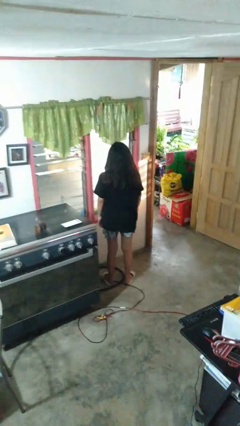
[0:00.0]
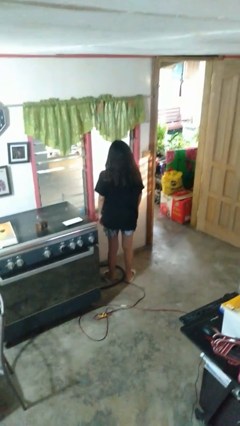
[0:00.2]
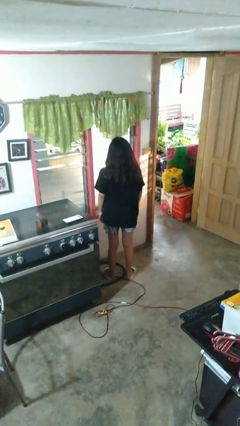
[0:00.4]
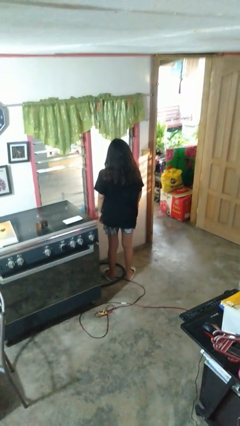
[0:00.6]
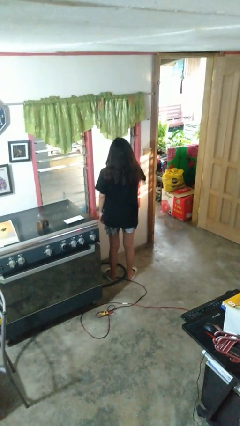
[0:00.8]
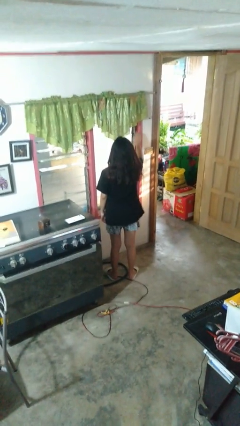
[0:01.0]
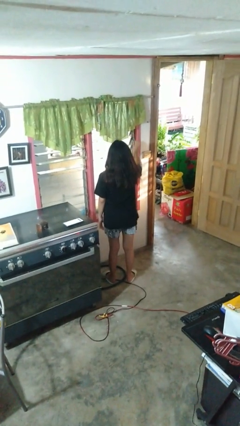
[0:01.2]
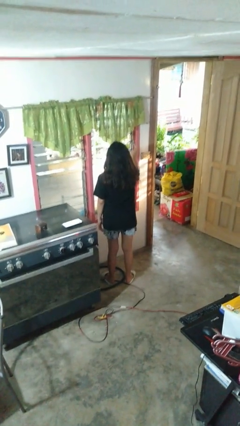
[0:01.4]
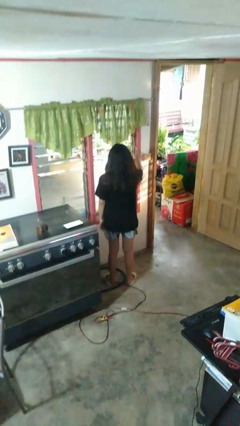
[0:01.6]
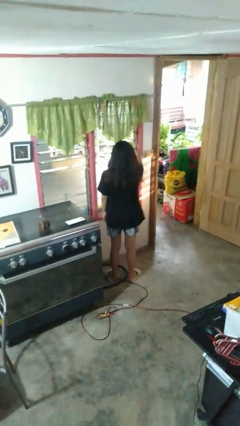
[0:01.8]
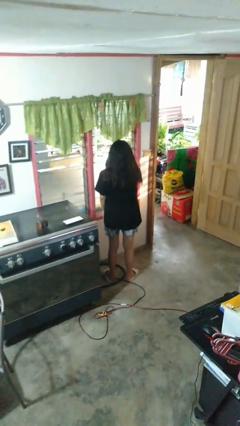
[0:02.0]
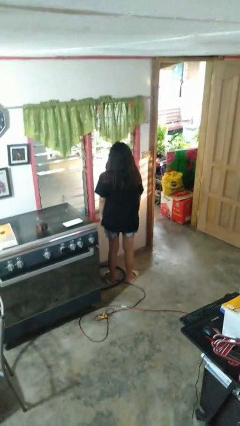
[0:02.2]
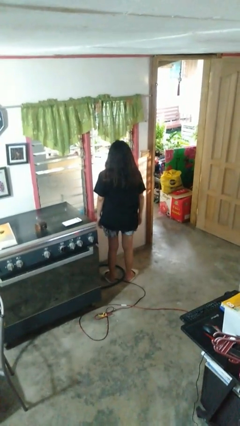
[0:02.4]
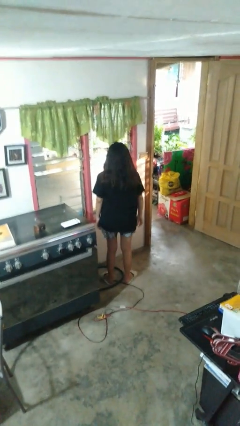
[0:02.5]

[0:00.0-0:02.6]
person opens home window

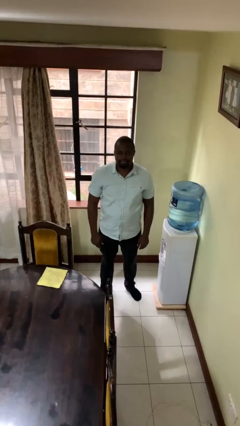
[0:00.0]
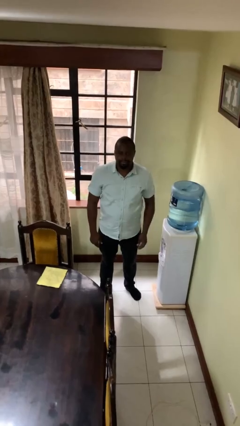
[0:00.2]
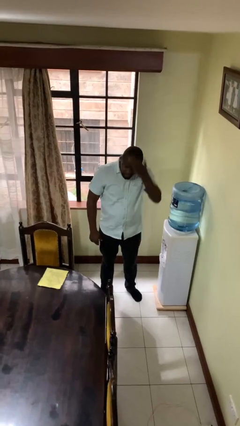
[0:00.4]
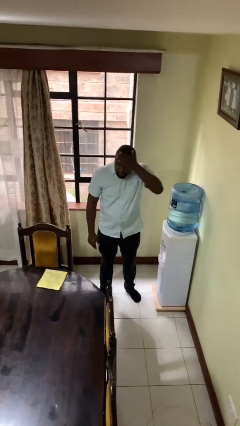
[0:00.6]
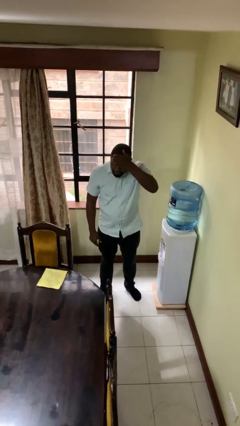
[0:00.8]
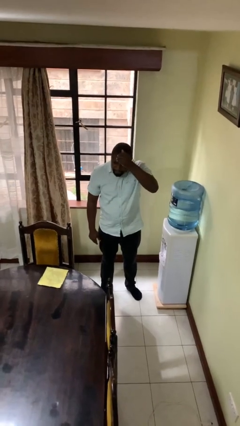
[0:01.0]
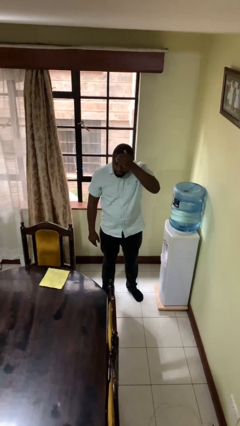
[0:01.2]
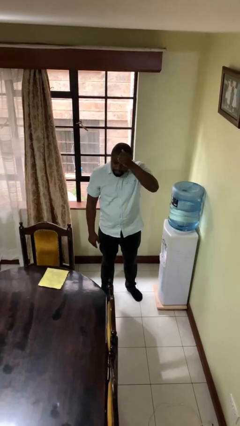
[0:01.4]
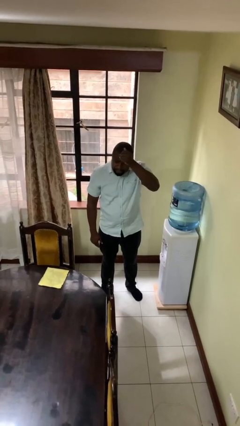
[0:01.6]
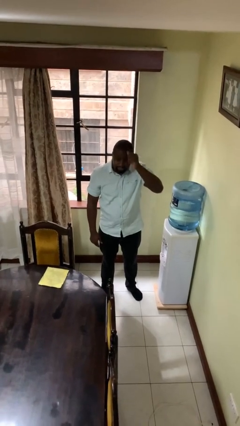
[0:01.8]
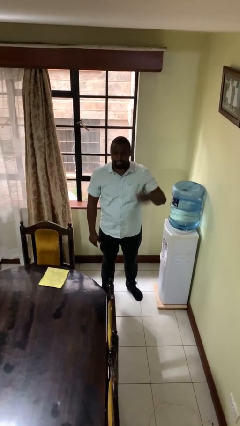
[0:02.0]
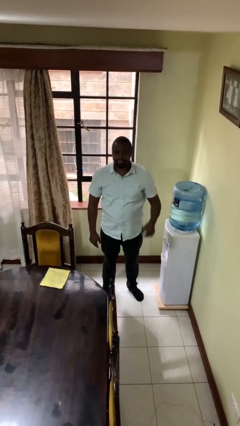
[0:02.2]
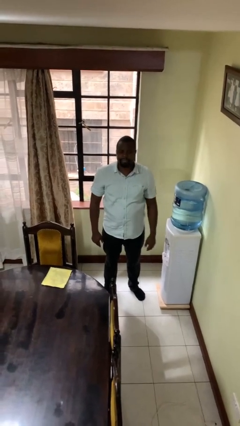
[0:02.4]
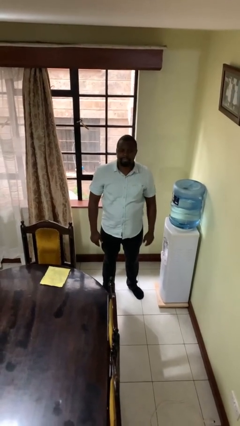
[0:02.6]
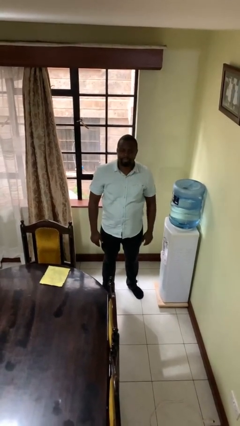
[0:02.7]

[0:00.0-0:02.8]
person swats bug

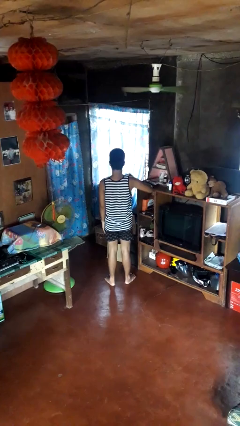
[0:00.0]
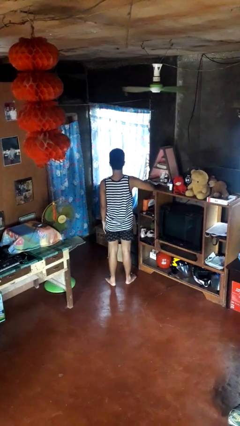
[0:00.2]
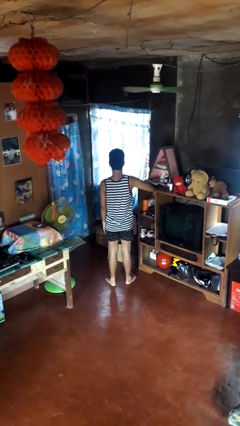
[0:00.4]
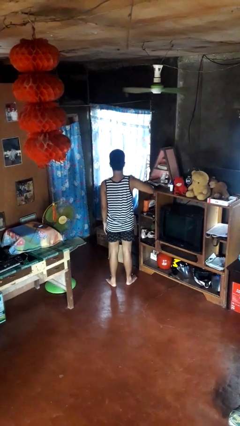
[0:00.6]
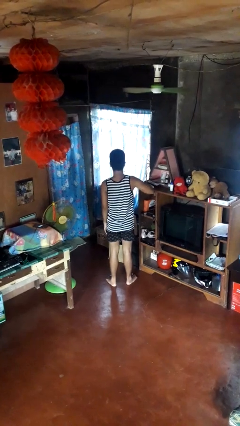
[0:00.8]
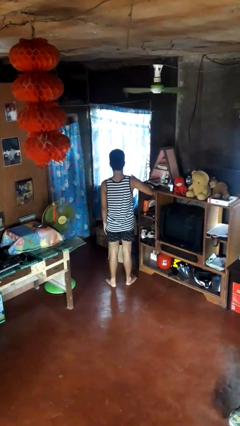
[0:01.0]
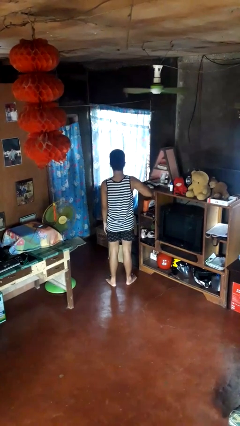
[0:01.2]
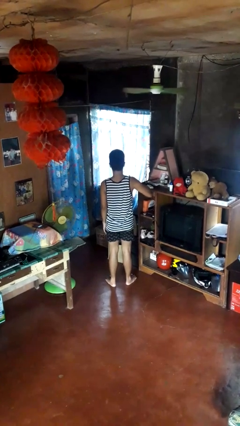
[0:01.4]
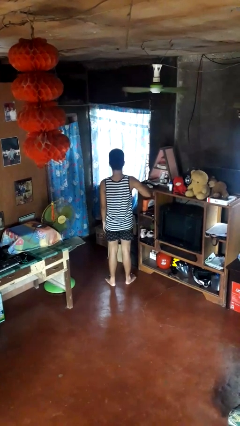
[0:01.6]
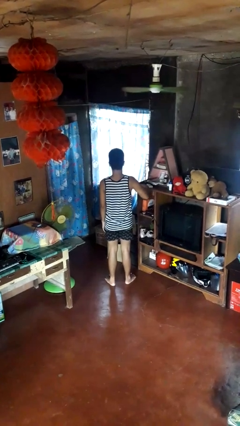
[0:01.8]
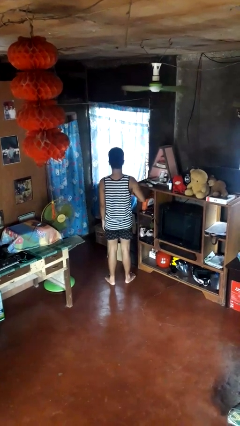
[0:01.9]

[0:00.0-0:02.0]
person drums on chest

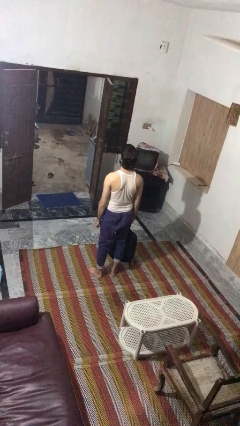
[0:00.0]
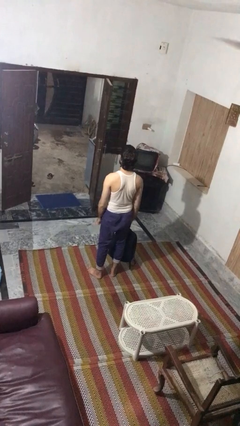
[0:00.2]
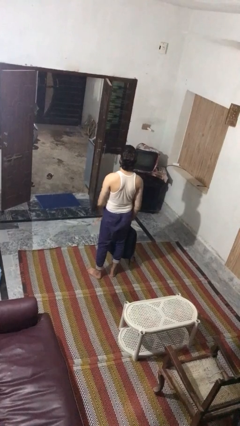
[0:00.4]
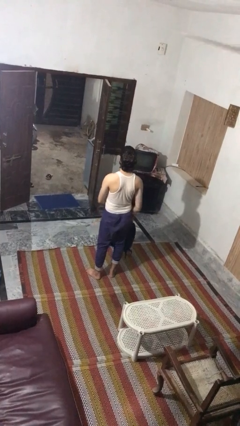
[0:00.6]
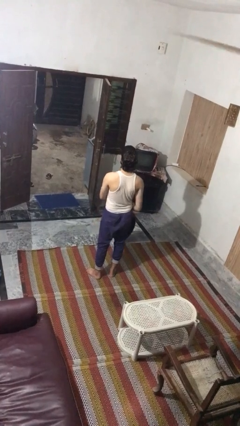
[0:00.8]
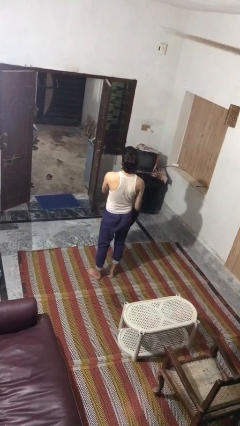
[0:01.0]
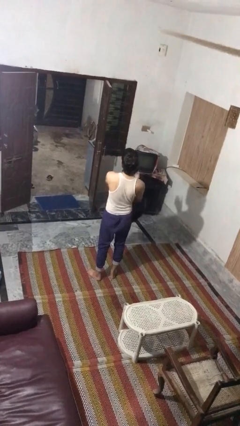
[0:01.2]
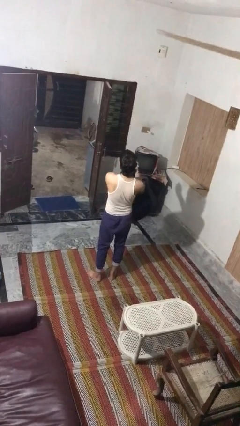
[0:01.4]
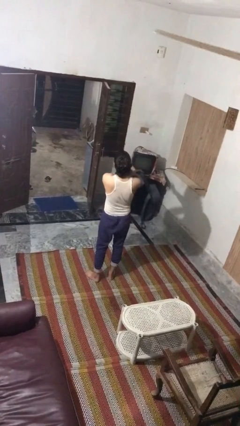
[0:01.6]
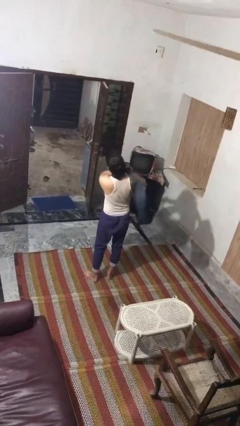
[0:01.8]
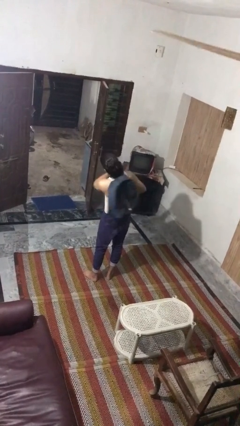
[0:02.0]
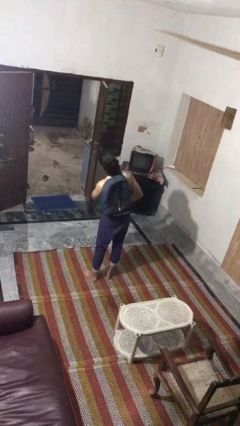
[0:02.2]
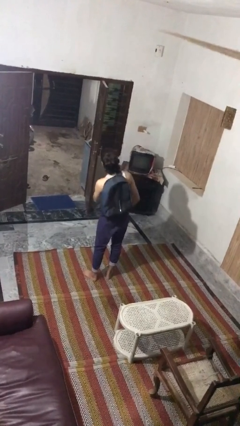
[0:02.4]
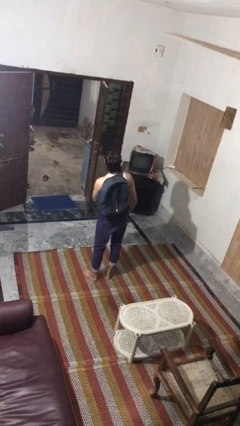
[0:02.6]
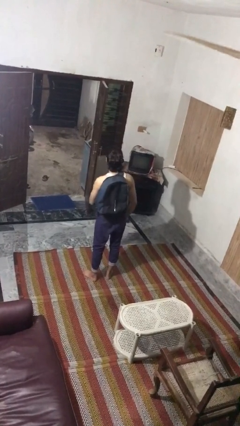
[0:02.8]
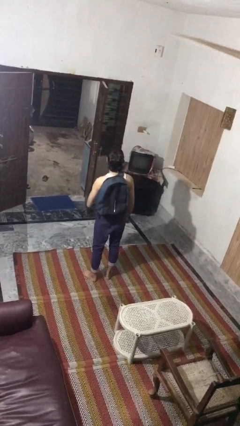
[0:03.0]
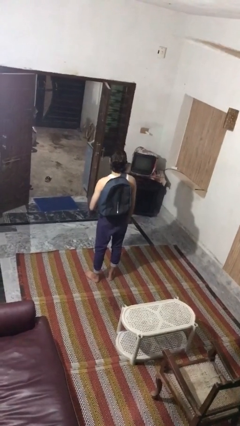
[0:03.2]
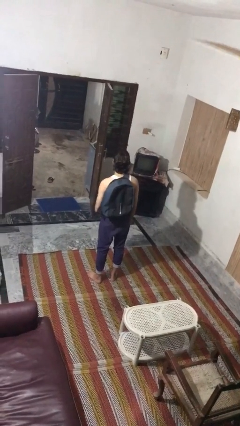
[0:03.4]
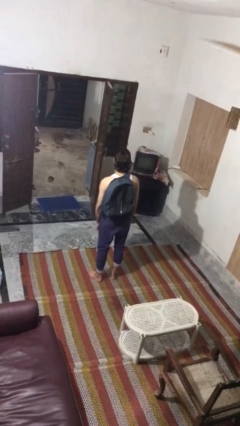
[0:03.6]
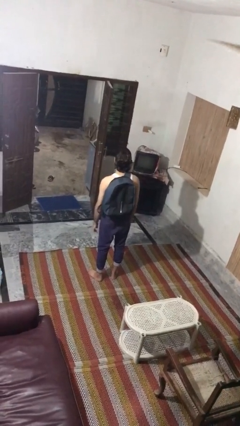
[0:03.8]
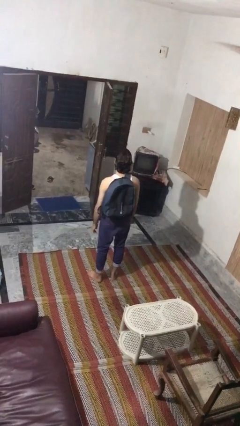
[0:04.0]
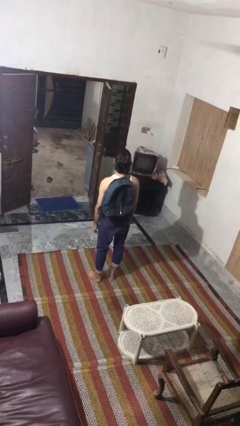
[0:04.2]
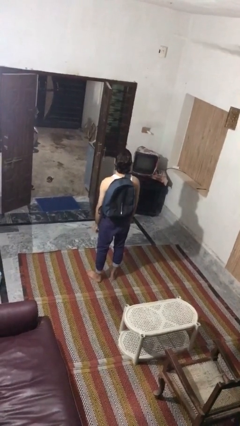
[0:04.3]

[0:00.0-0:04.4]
person puts on backpack

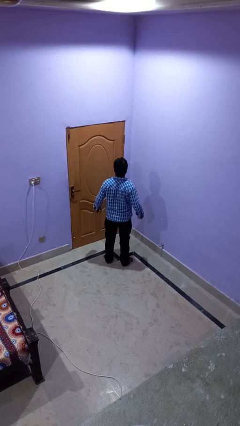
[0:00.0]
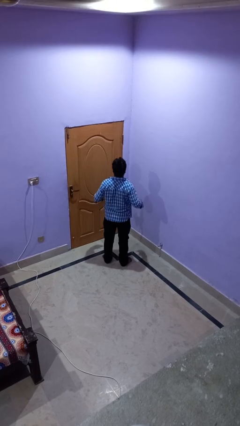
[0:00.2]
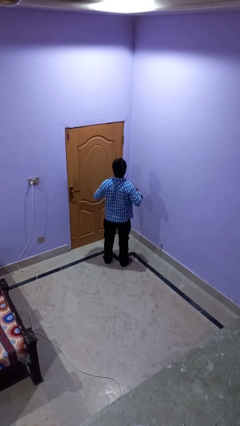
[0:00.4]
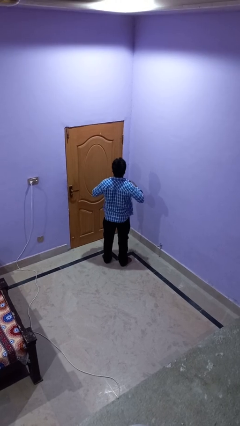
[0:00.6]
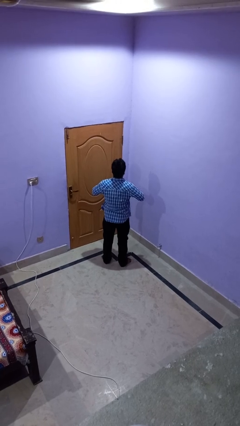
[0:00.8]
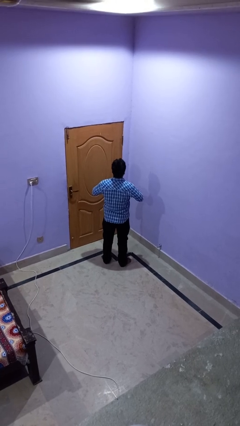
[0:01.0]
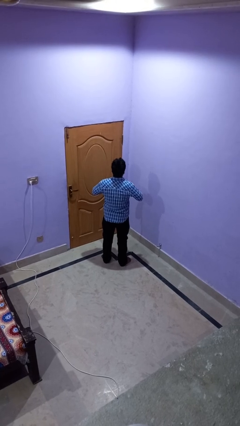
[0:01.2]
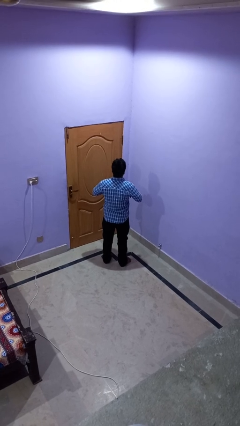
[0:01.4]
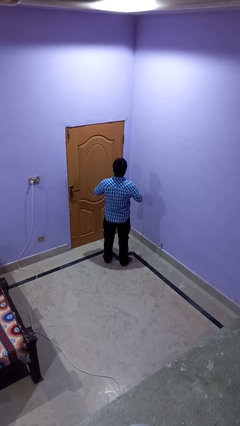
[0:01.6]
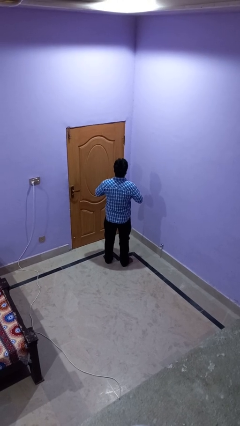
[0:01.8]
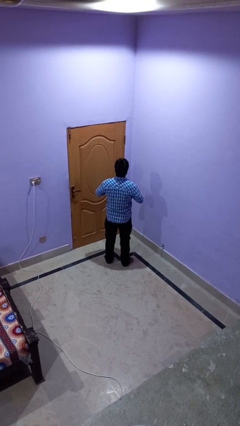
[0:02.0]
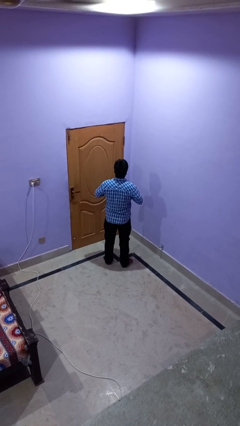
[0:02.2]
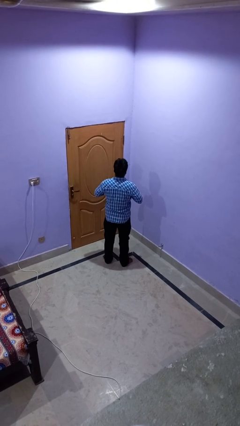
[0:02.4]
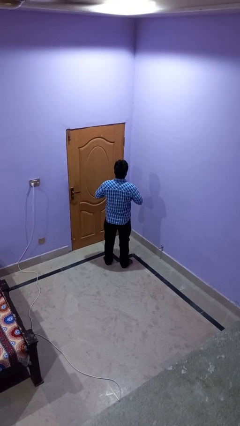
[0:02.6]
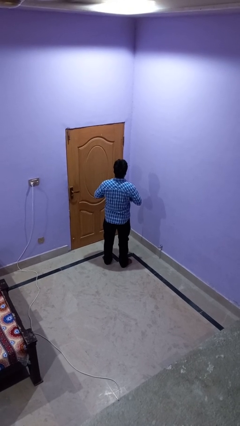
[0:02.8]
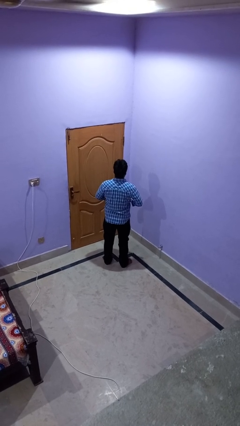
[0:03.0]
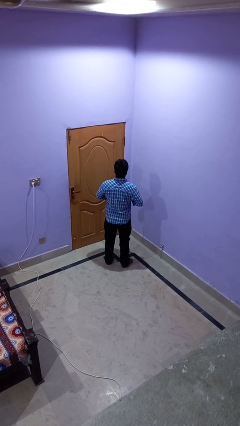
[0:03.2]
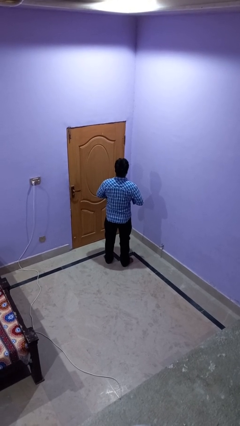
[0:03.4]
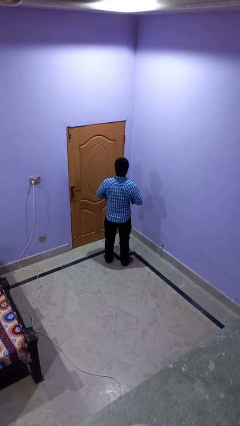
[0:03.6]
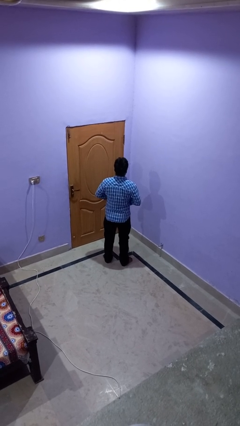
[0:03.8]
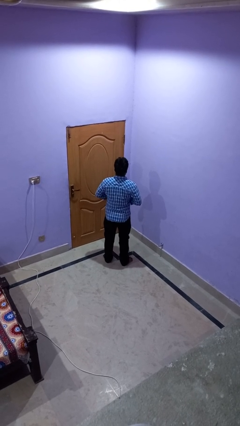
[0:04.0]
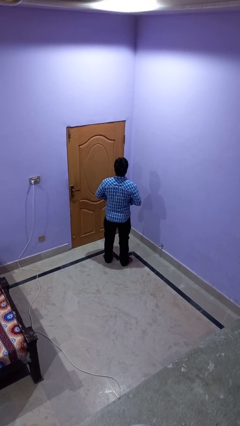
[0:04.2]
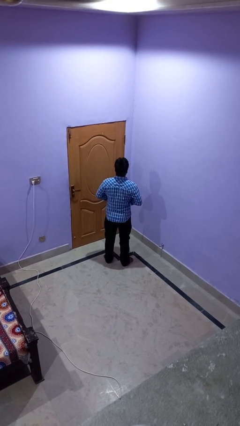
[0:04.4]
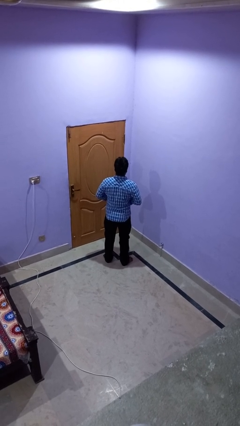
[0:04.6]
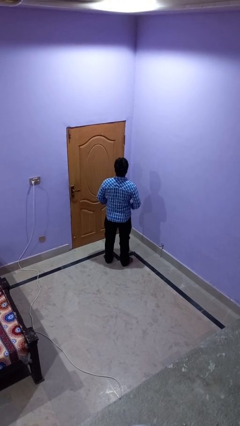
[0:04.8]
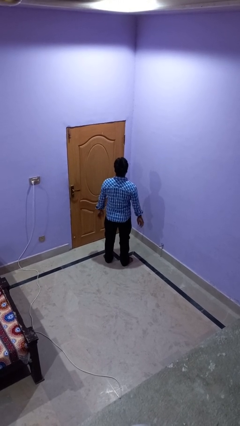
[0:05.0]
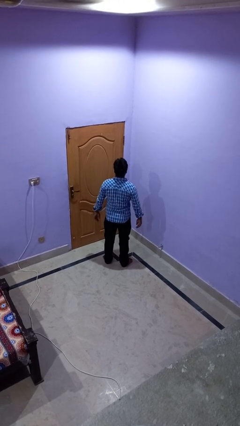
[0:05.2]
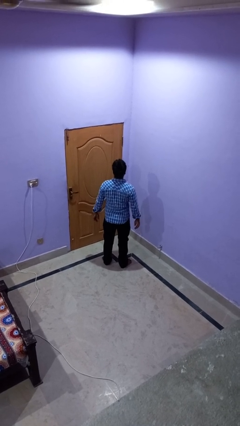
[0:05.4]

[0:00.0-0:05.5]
person buttons shirt

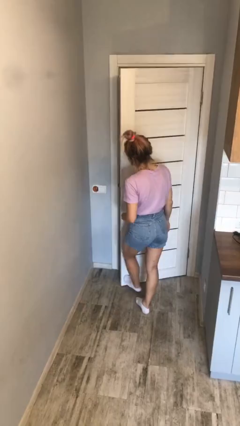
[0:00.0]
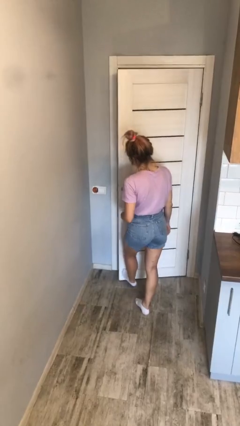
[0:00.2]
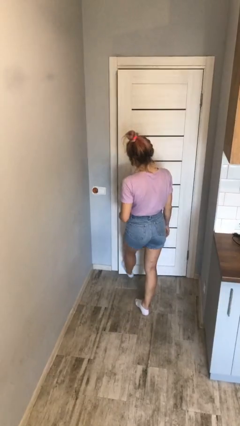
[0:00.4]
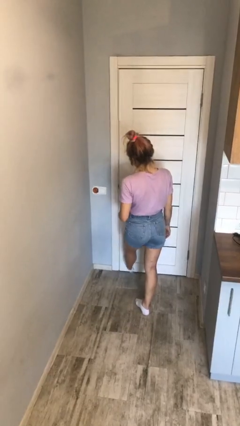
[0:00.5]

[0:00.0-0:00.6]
person closes door with foot
